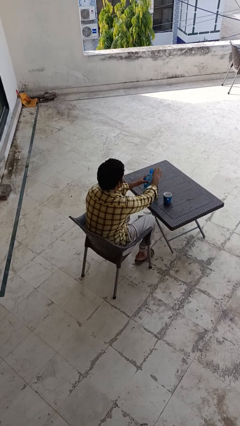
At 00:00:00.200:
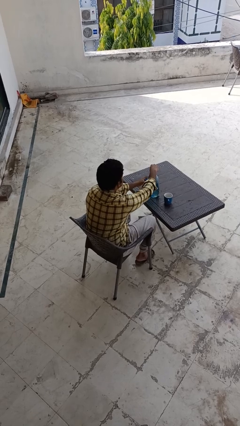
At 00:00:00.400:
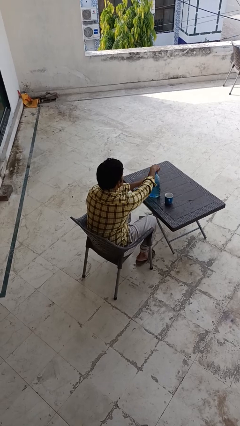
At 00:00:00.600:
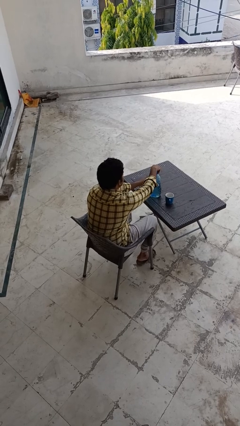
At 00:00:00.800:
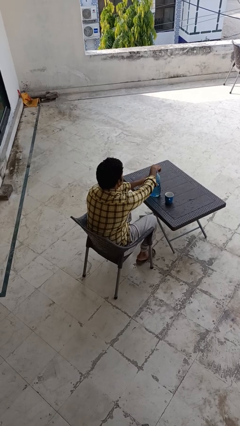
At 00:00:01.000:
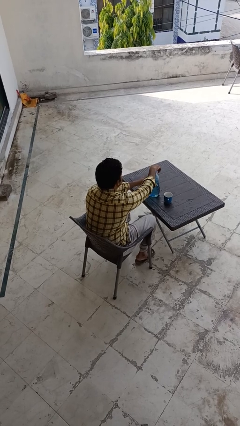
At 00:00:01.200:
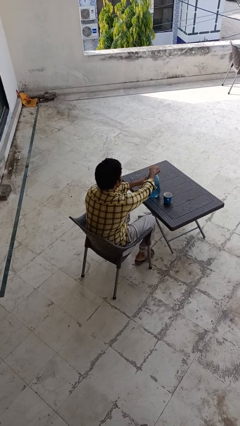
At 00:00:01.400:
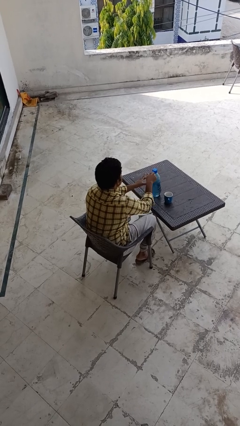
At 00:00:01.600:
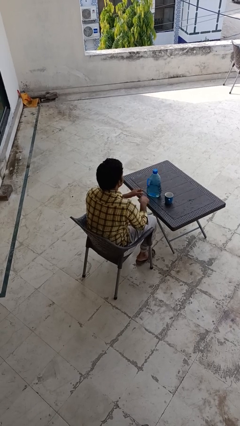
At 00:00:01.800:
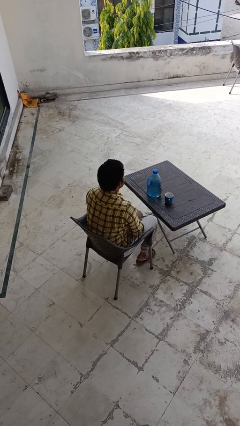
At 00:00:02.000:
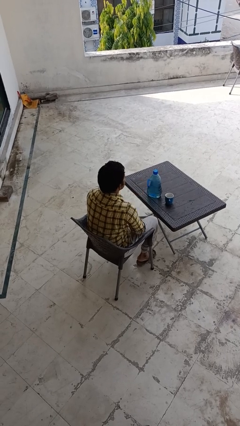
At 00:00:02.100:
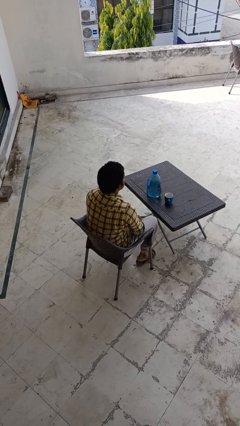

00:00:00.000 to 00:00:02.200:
person screws lid to bottle

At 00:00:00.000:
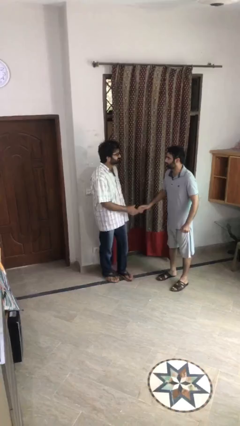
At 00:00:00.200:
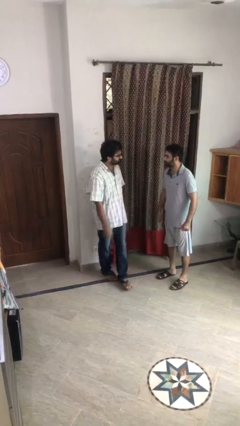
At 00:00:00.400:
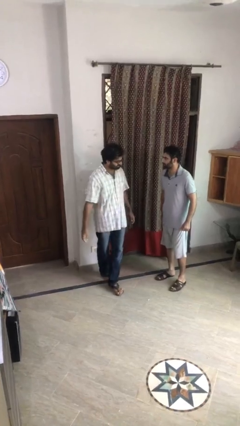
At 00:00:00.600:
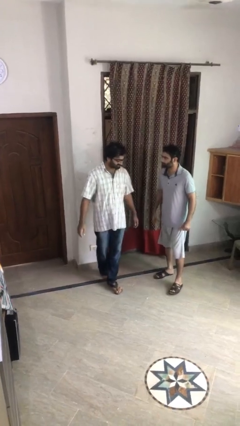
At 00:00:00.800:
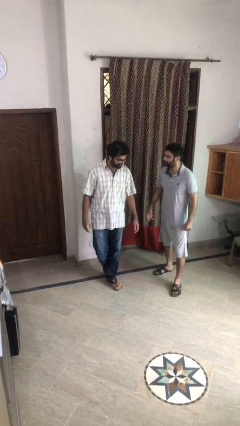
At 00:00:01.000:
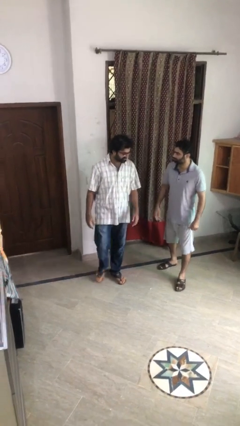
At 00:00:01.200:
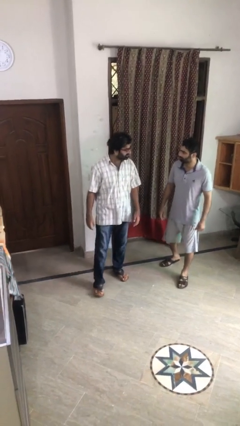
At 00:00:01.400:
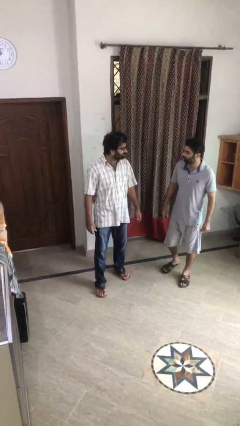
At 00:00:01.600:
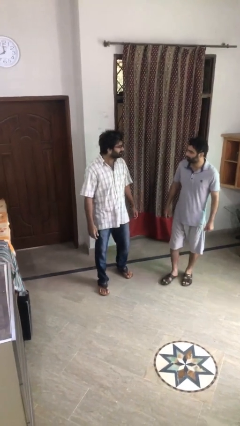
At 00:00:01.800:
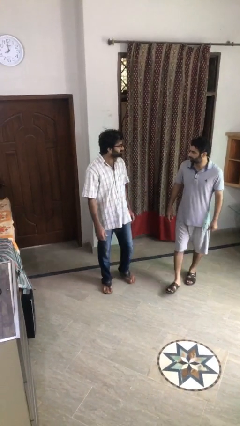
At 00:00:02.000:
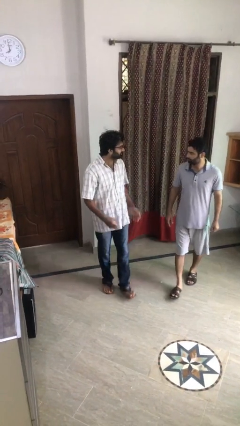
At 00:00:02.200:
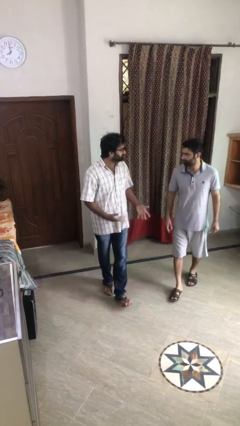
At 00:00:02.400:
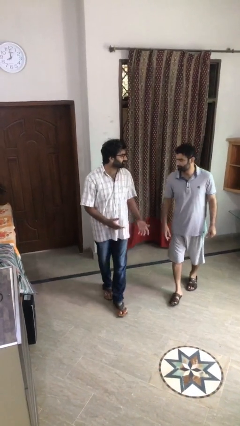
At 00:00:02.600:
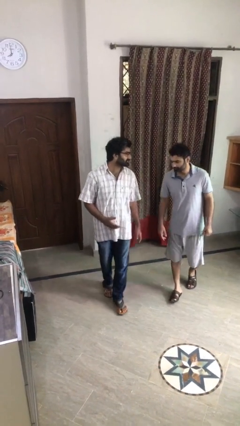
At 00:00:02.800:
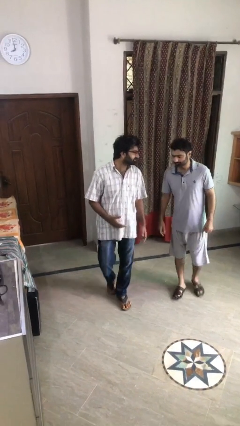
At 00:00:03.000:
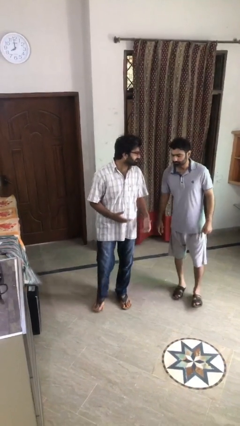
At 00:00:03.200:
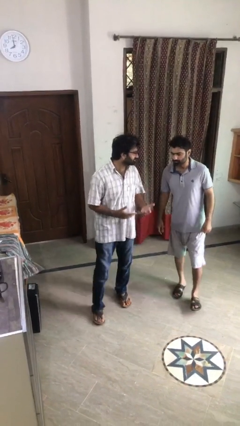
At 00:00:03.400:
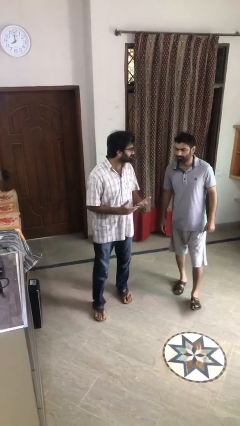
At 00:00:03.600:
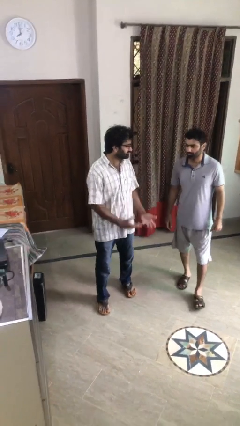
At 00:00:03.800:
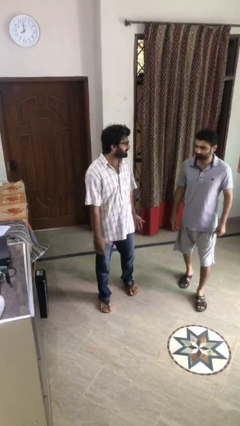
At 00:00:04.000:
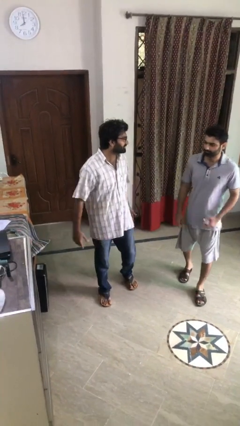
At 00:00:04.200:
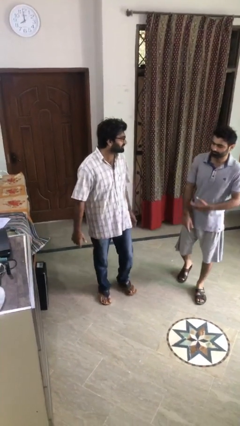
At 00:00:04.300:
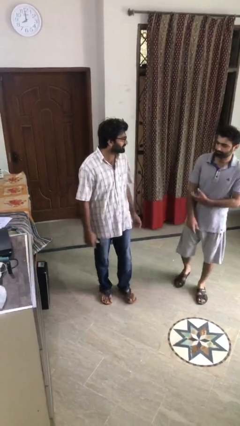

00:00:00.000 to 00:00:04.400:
person talks to person

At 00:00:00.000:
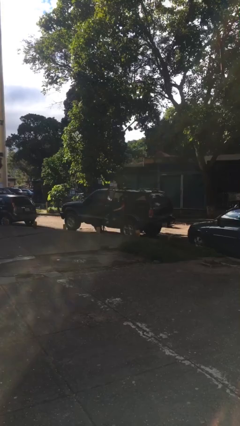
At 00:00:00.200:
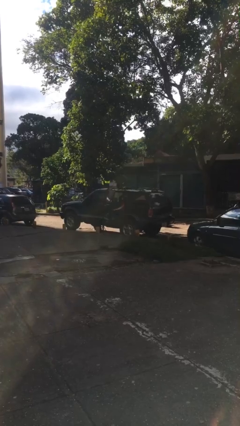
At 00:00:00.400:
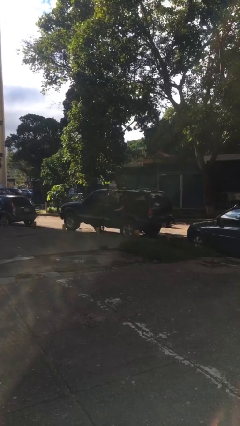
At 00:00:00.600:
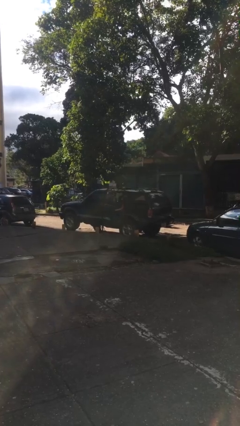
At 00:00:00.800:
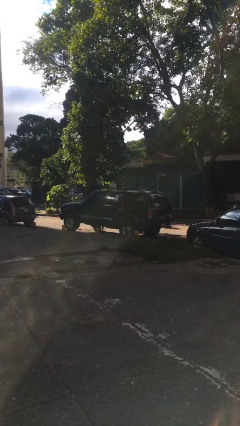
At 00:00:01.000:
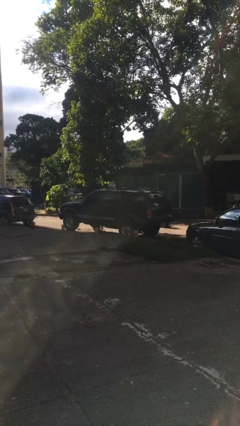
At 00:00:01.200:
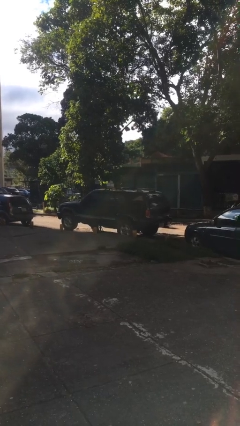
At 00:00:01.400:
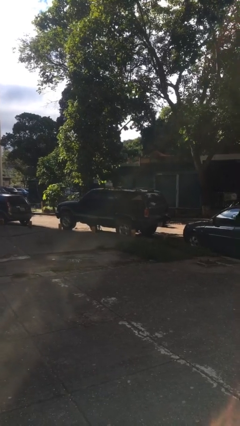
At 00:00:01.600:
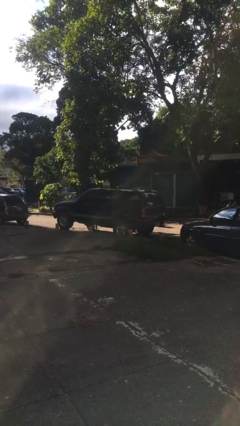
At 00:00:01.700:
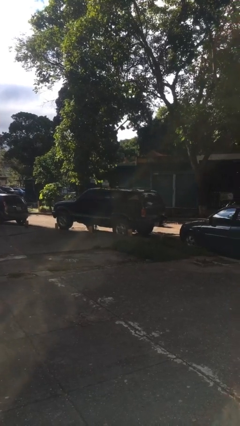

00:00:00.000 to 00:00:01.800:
person closes car door

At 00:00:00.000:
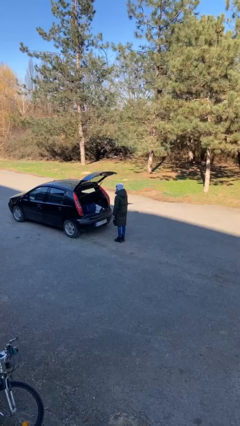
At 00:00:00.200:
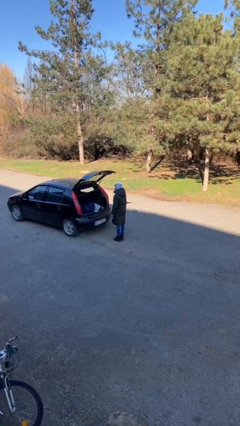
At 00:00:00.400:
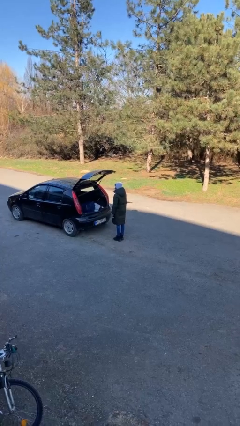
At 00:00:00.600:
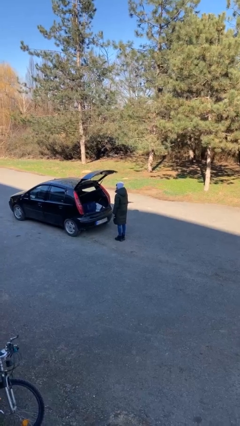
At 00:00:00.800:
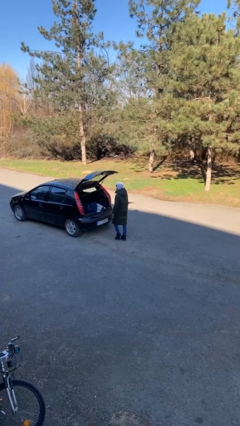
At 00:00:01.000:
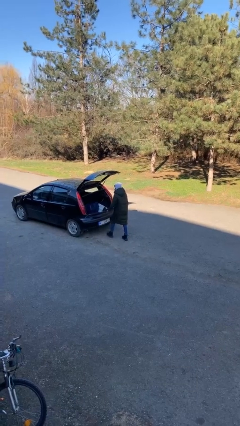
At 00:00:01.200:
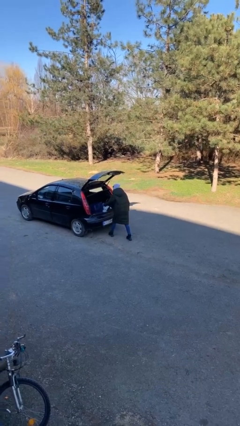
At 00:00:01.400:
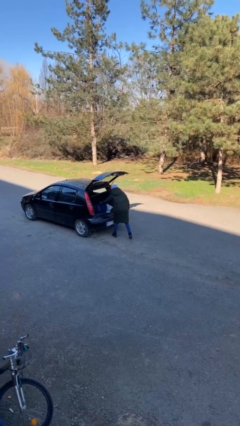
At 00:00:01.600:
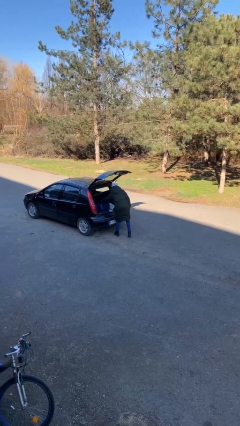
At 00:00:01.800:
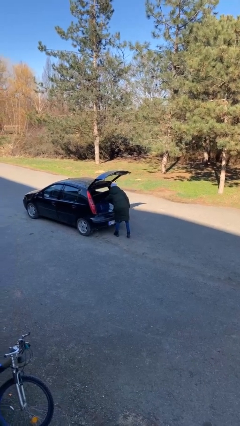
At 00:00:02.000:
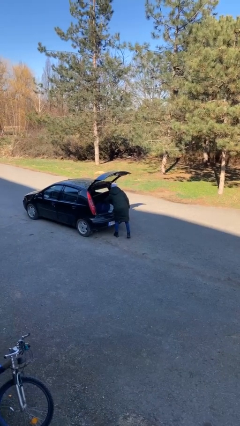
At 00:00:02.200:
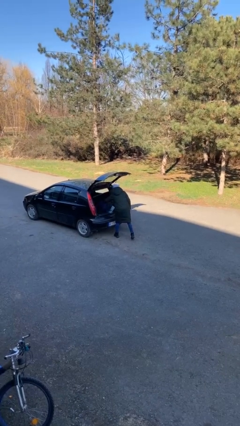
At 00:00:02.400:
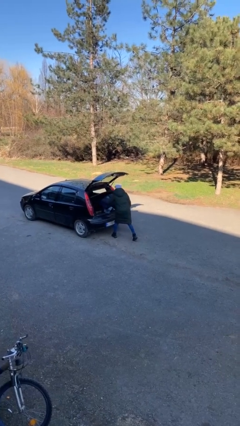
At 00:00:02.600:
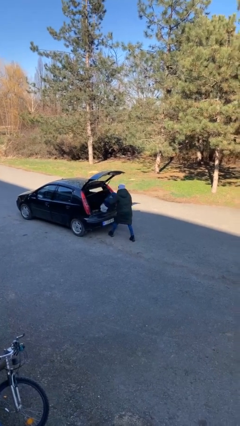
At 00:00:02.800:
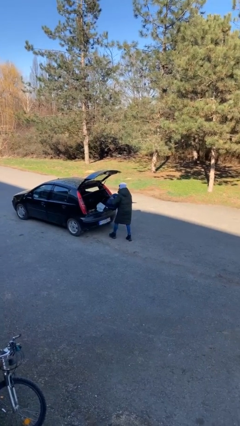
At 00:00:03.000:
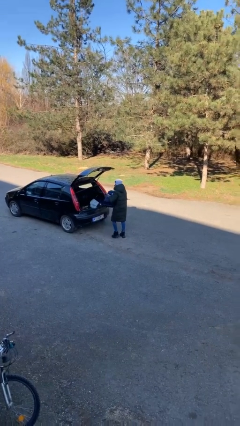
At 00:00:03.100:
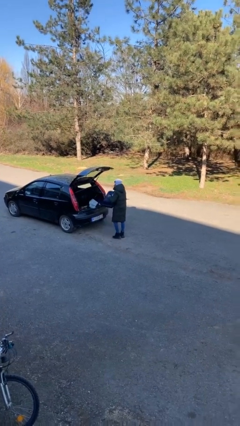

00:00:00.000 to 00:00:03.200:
person unloads car

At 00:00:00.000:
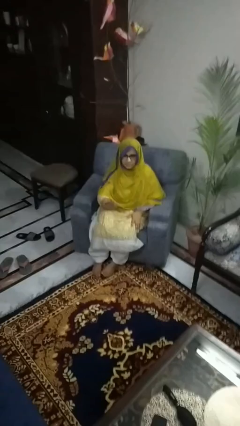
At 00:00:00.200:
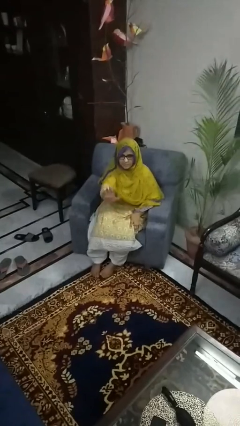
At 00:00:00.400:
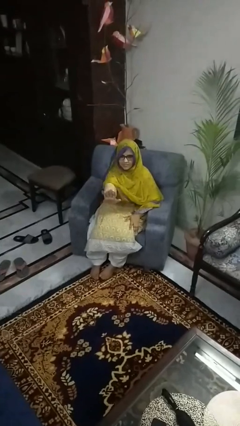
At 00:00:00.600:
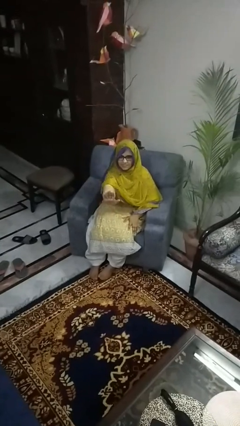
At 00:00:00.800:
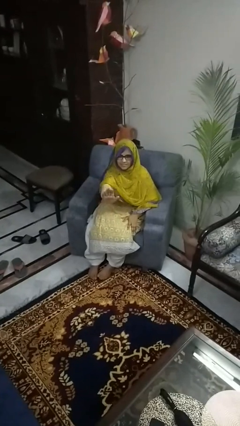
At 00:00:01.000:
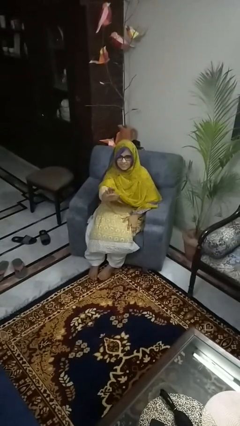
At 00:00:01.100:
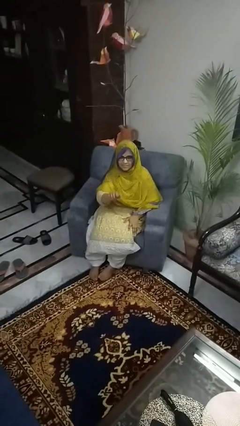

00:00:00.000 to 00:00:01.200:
person gestures stop

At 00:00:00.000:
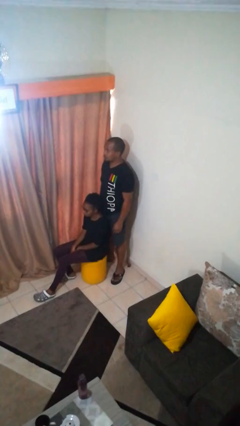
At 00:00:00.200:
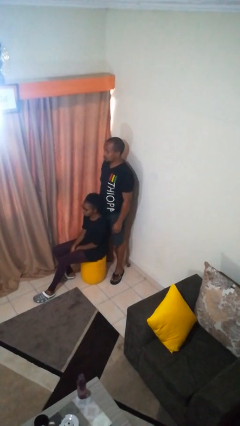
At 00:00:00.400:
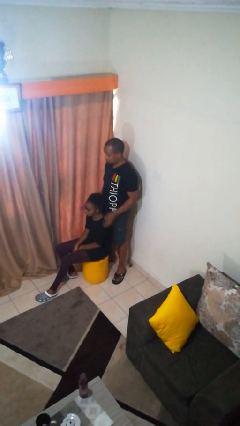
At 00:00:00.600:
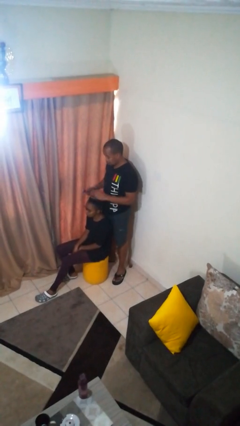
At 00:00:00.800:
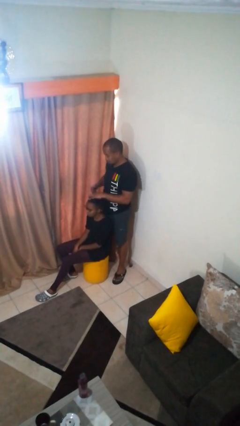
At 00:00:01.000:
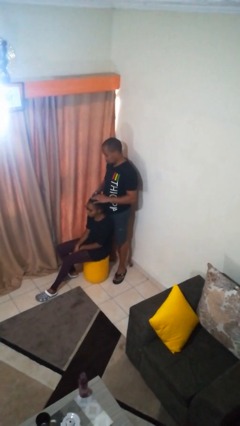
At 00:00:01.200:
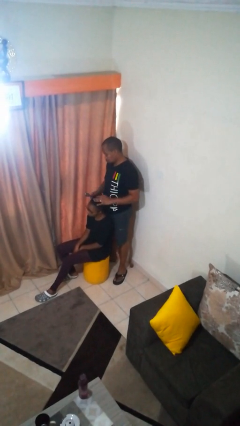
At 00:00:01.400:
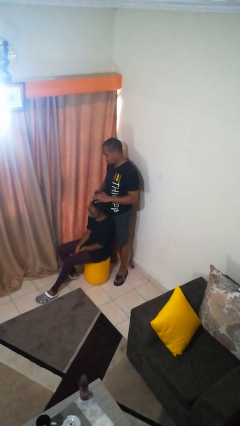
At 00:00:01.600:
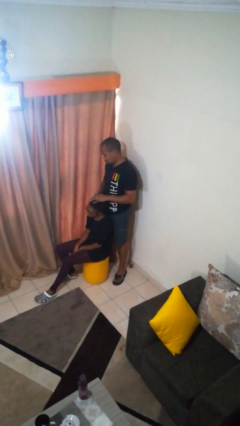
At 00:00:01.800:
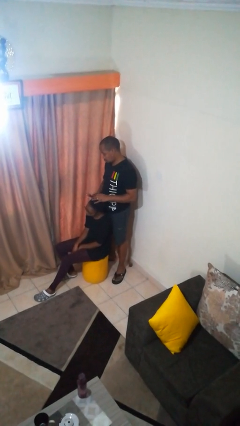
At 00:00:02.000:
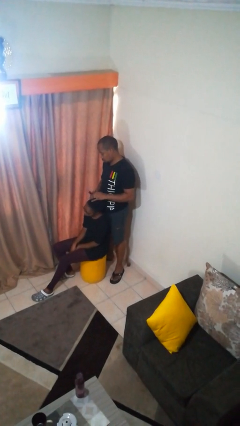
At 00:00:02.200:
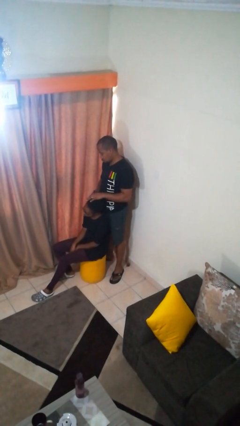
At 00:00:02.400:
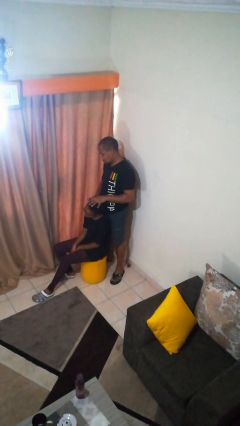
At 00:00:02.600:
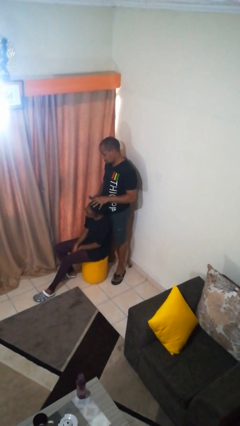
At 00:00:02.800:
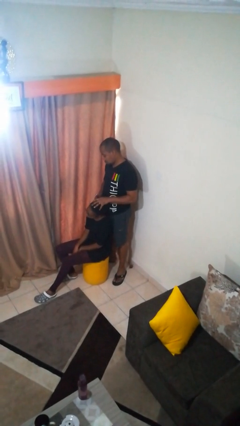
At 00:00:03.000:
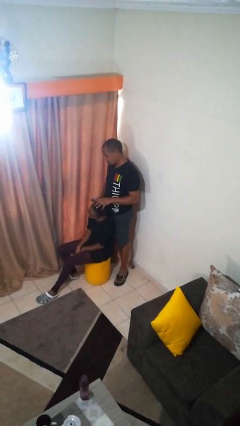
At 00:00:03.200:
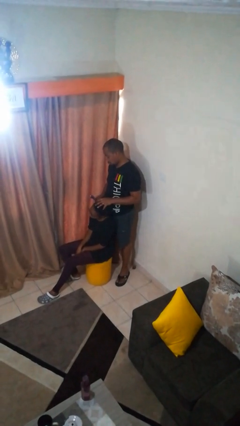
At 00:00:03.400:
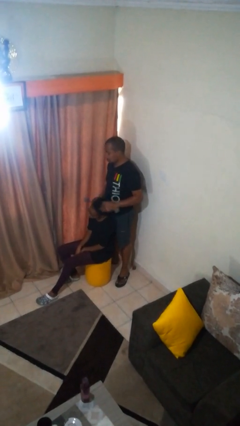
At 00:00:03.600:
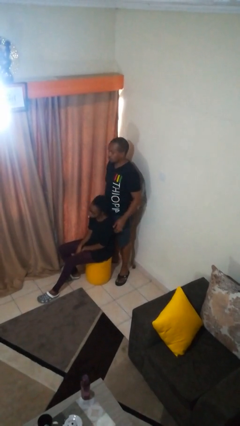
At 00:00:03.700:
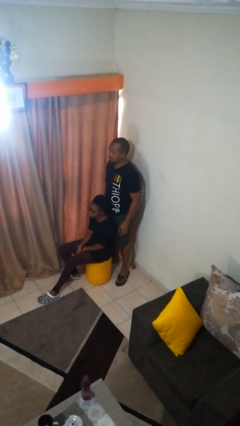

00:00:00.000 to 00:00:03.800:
person brushes hair of person

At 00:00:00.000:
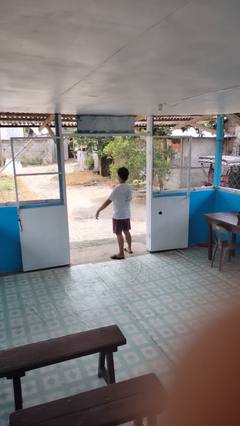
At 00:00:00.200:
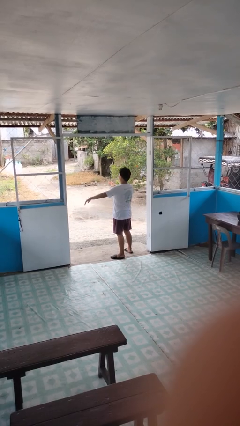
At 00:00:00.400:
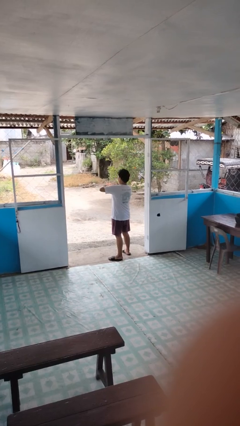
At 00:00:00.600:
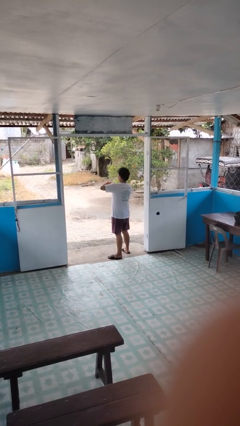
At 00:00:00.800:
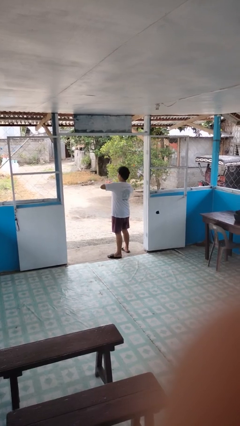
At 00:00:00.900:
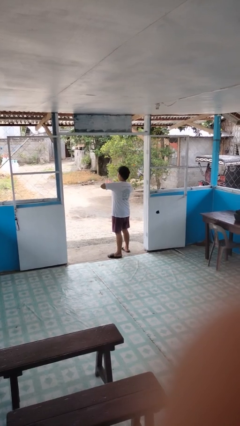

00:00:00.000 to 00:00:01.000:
person drums on chest
